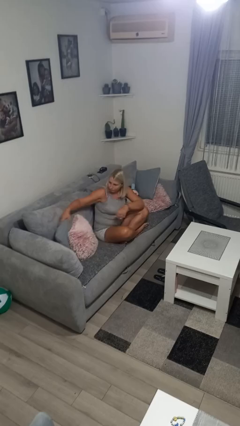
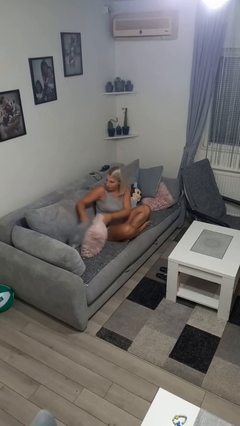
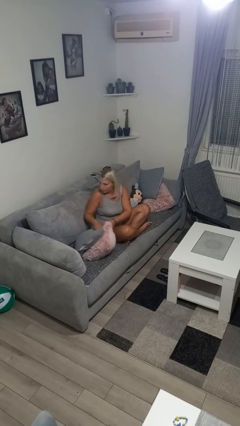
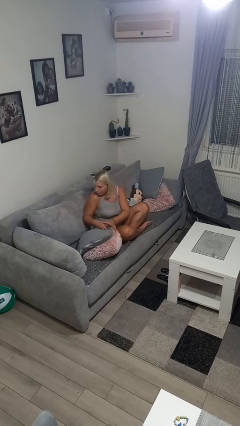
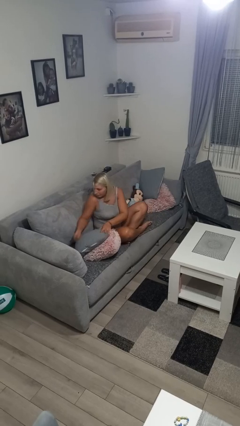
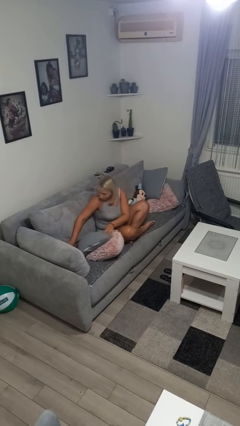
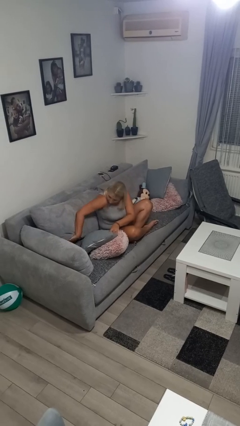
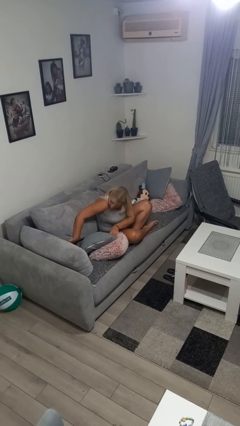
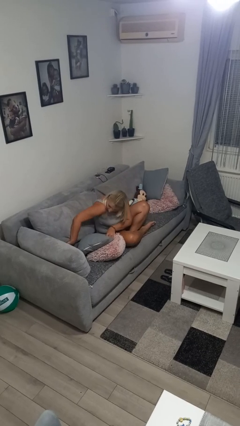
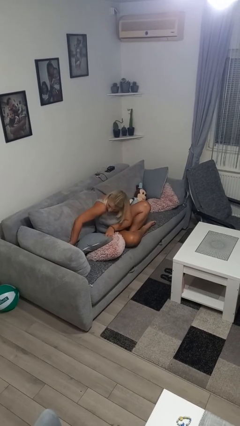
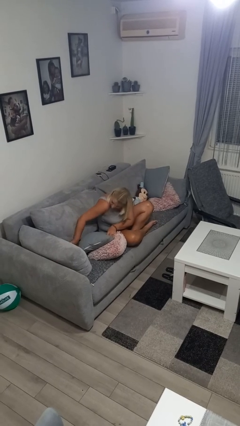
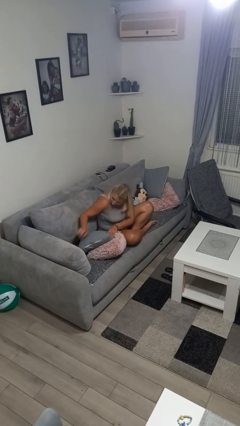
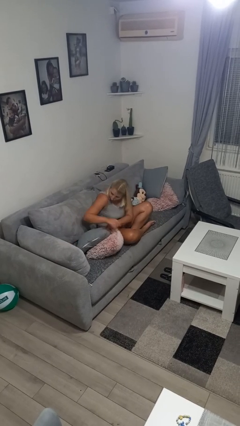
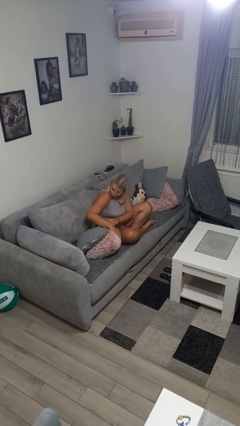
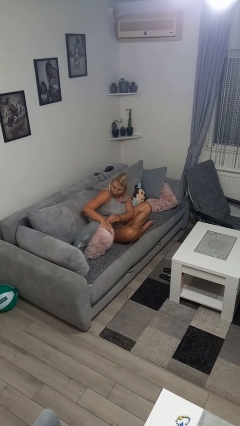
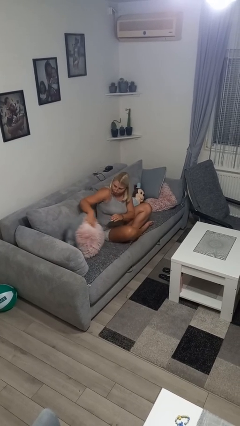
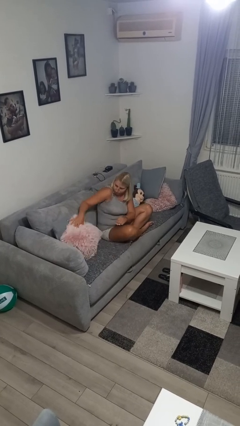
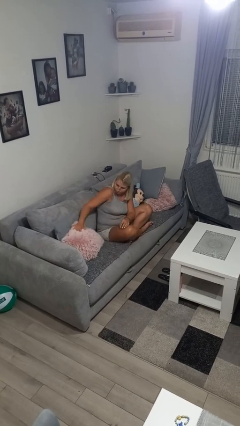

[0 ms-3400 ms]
person searches in couch

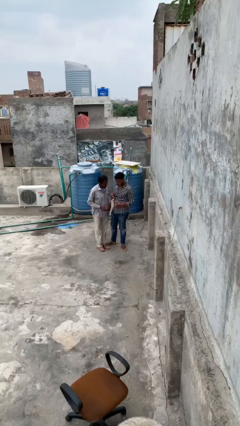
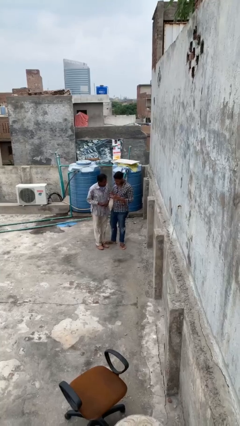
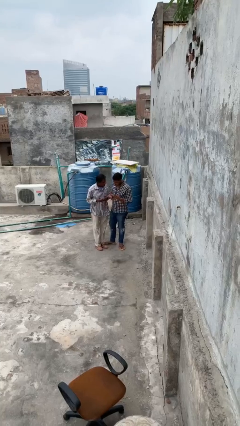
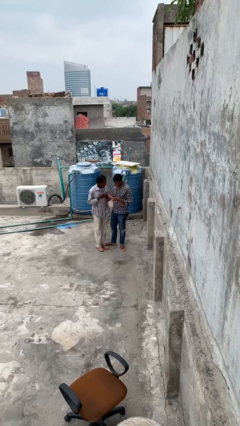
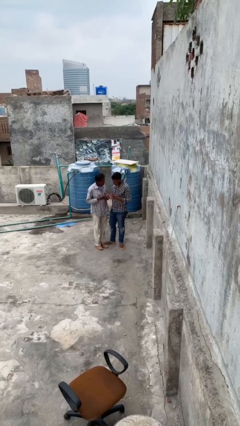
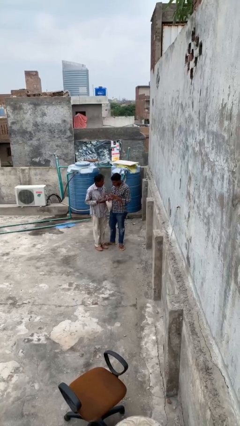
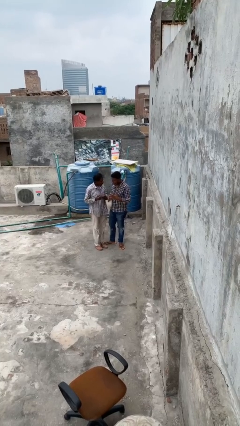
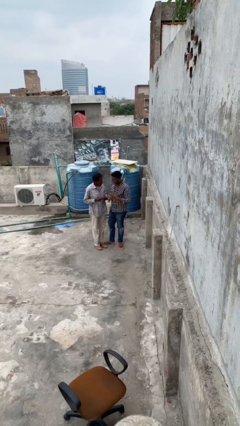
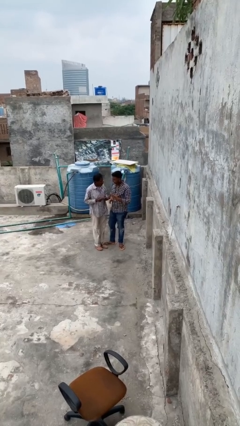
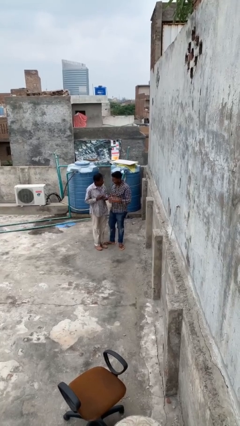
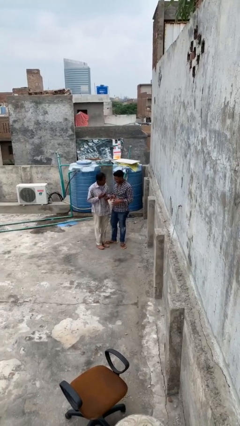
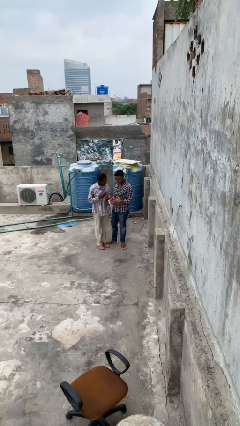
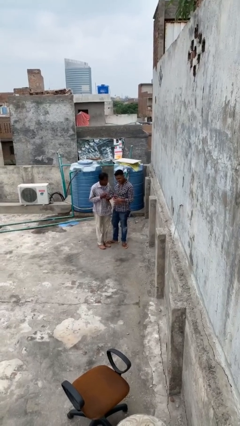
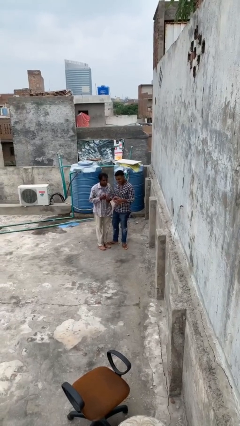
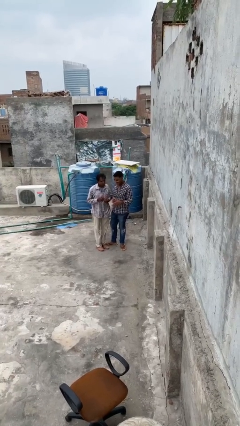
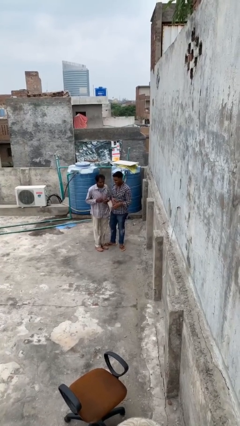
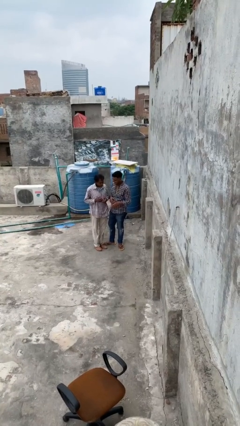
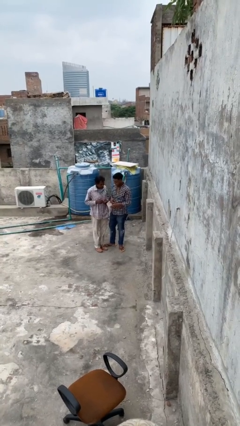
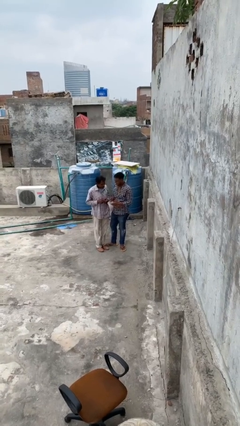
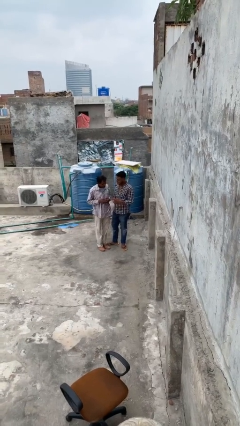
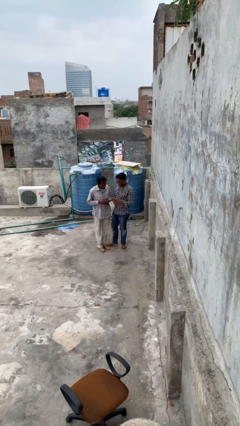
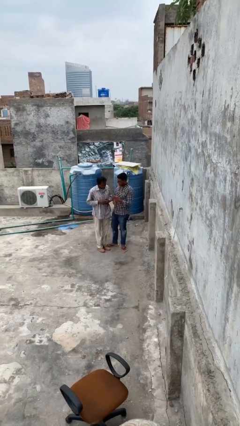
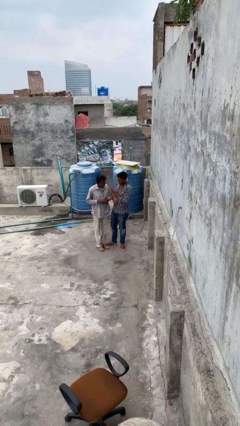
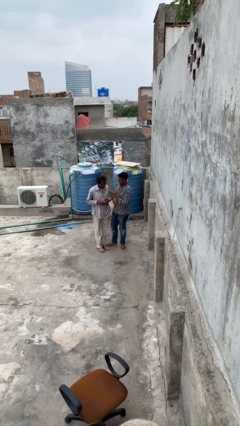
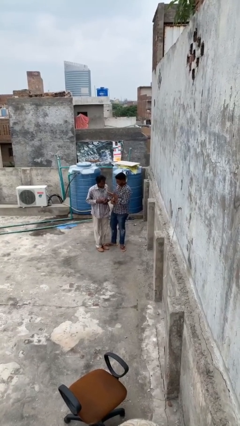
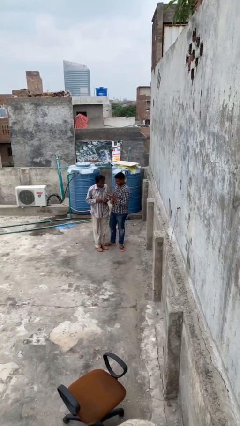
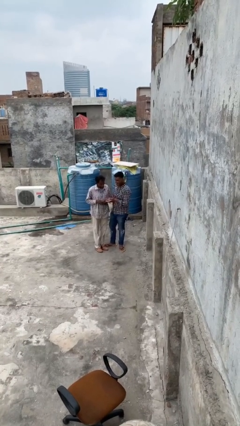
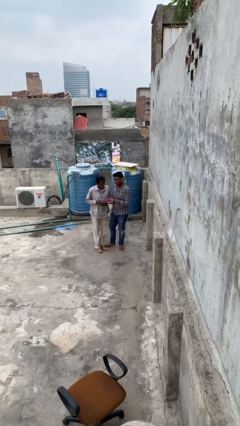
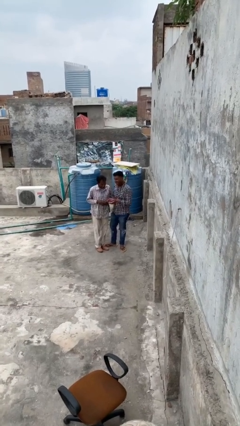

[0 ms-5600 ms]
person talks to person

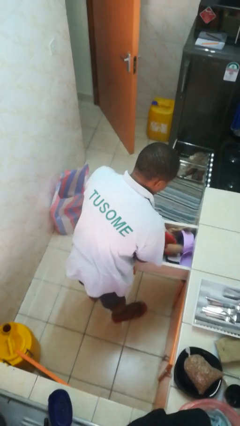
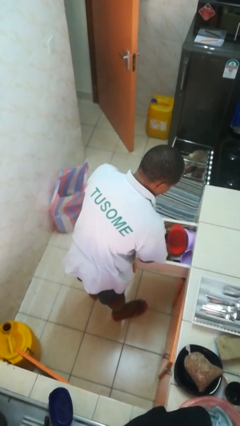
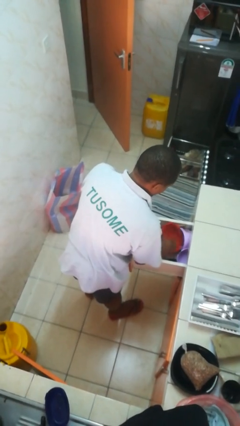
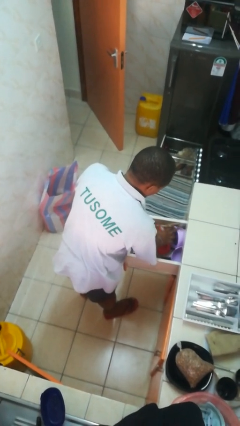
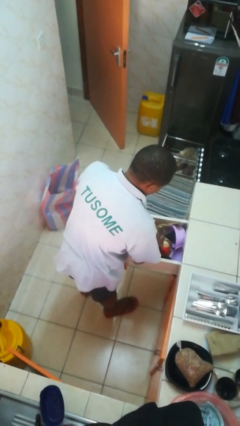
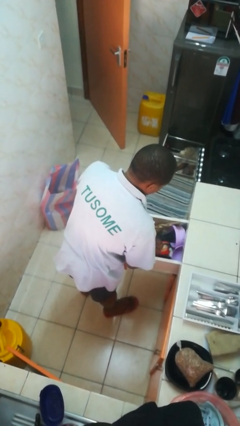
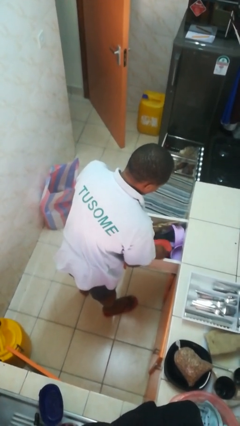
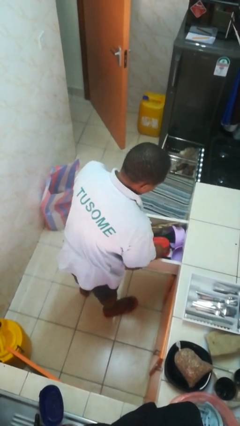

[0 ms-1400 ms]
person searches in kitchen drawer

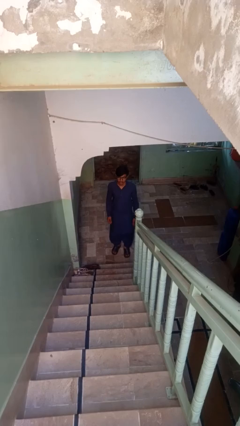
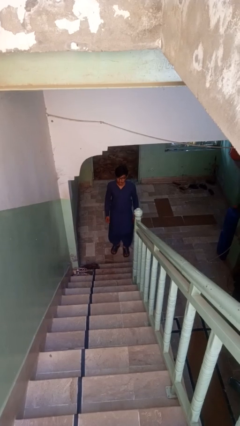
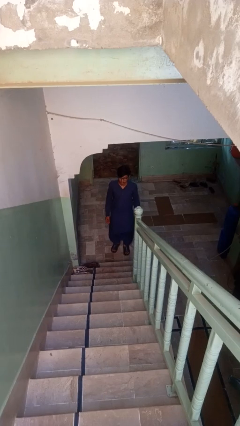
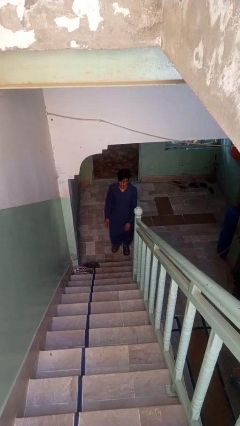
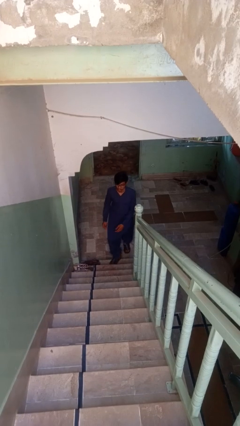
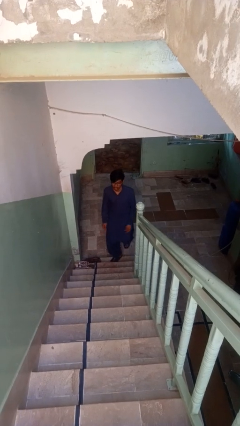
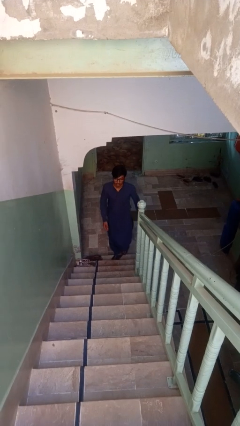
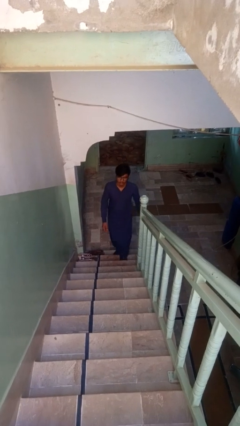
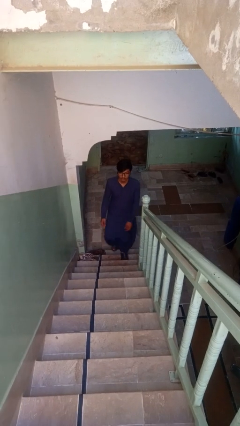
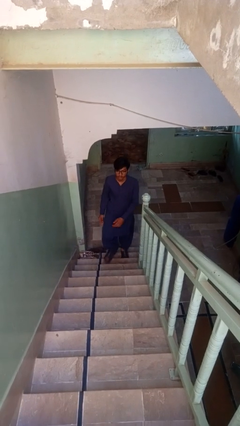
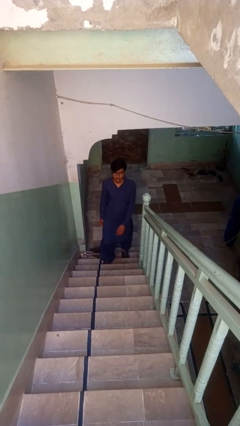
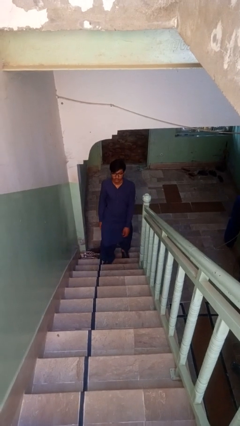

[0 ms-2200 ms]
person climbs up stairs

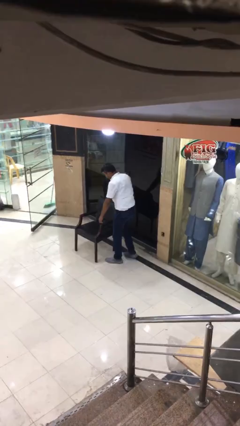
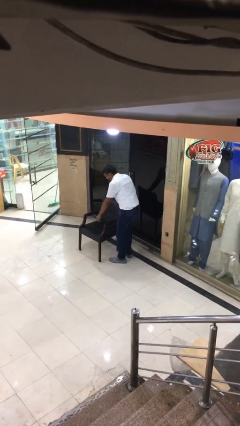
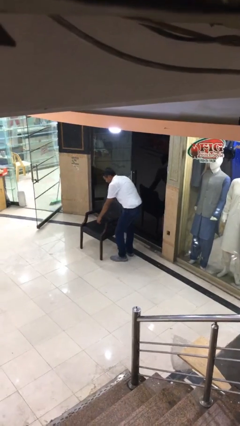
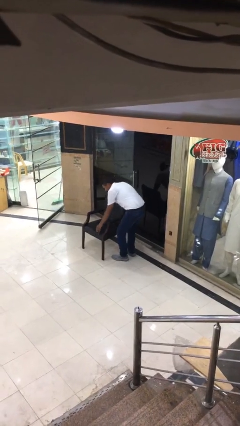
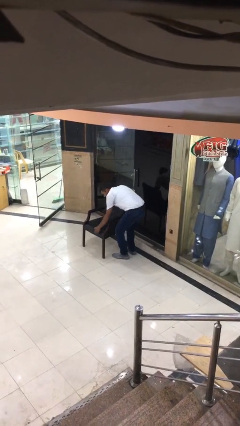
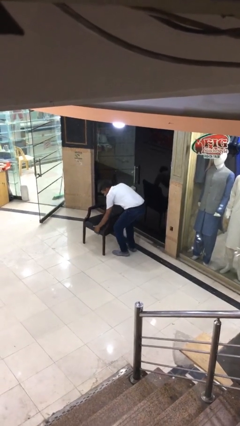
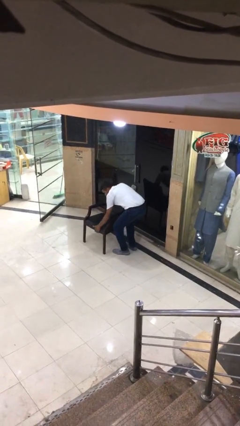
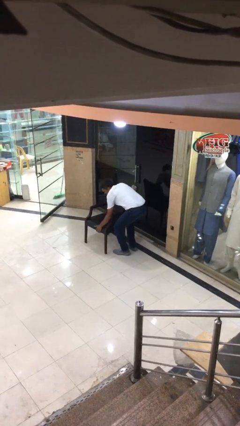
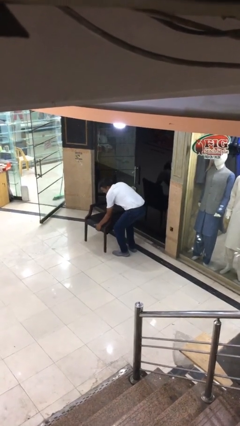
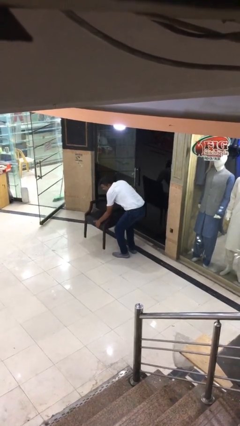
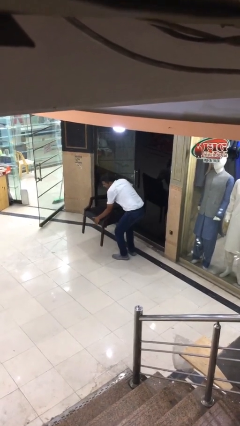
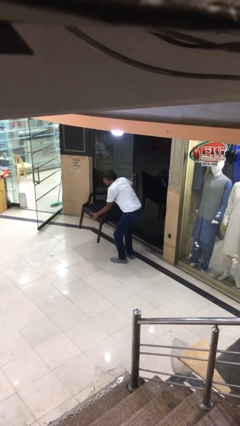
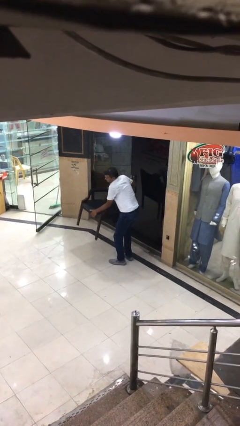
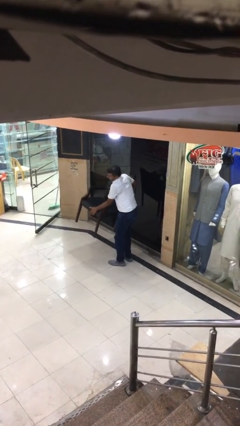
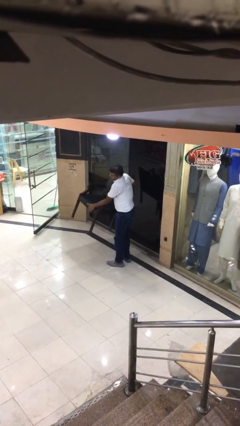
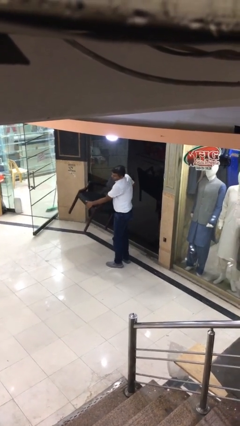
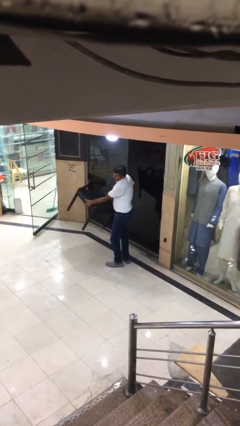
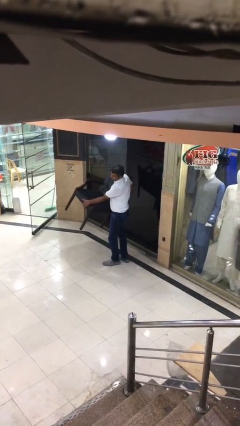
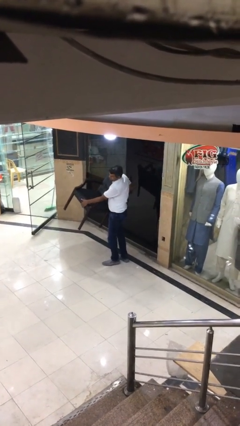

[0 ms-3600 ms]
person picks up object from floor

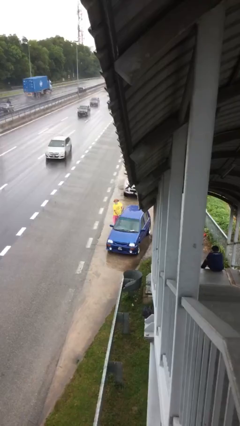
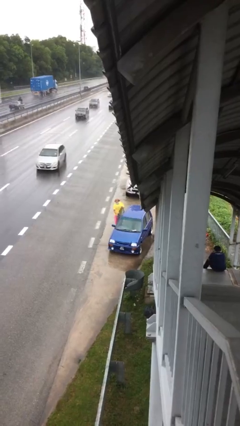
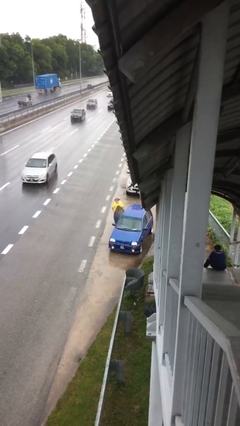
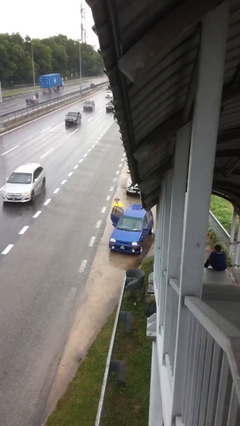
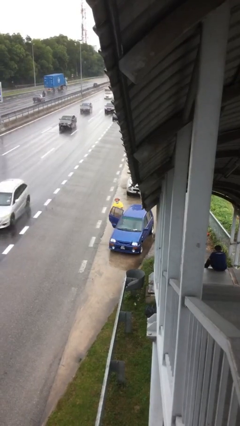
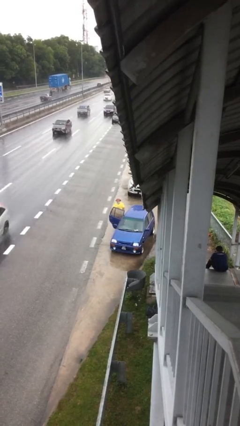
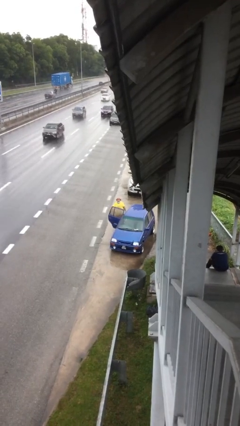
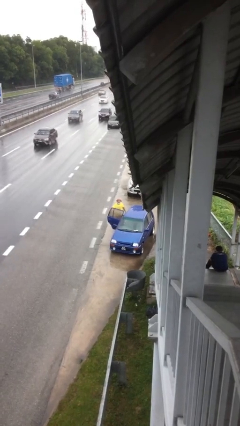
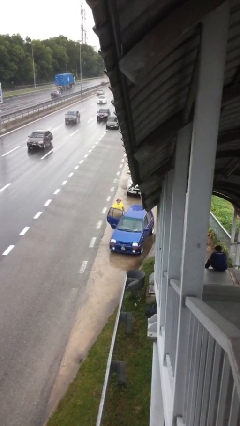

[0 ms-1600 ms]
person opens car door
